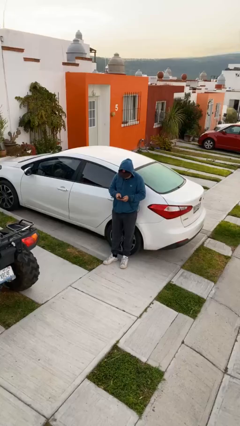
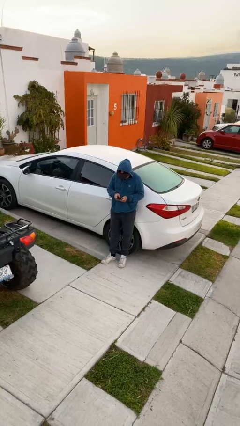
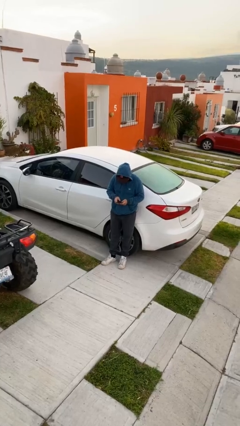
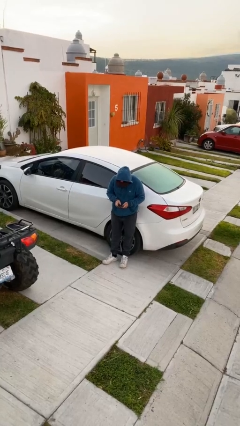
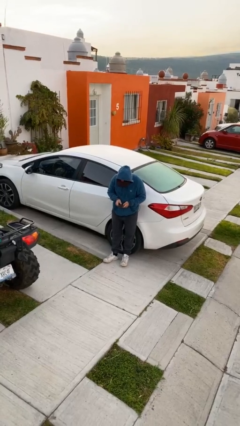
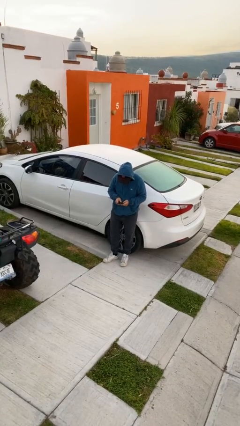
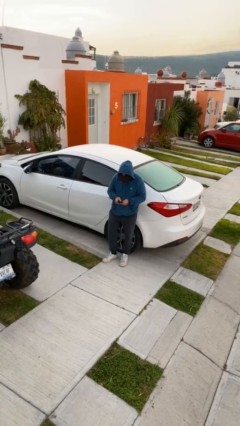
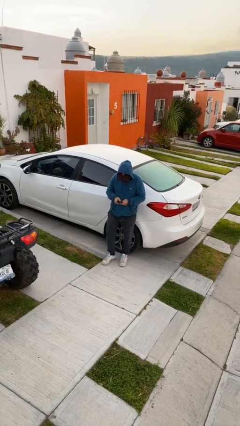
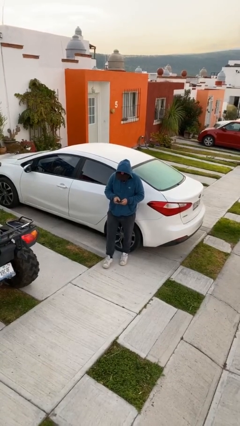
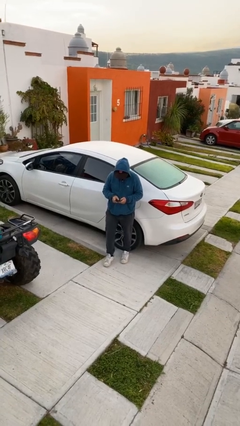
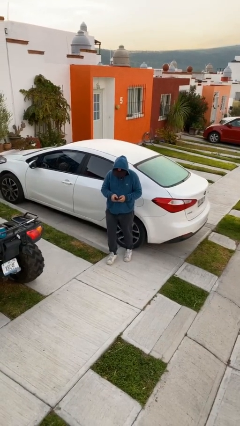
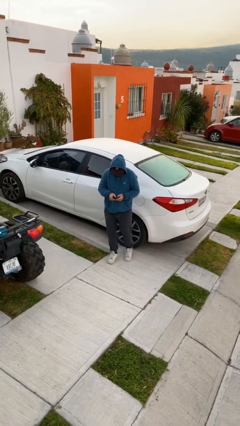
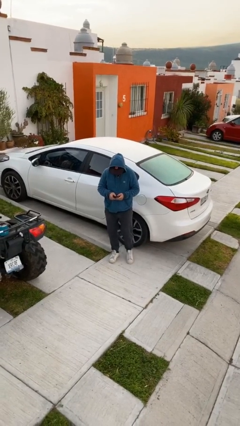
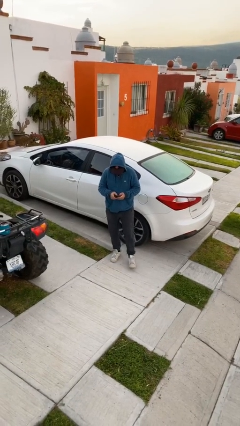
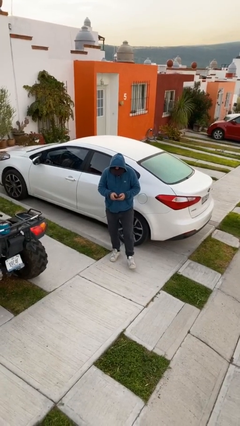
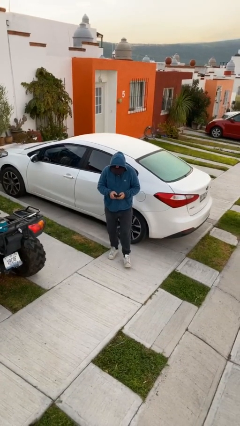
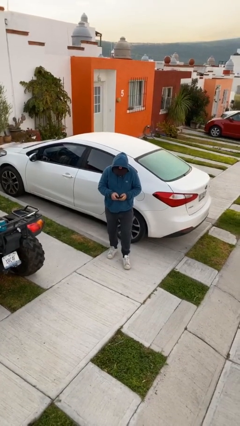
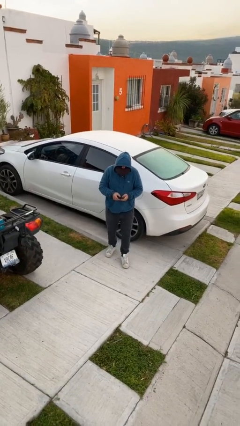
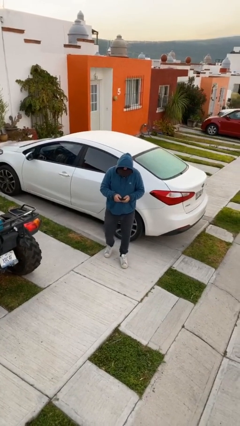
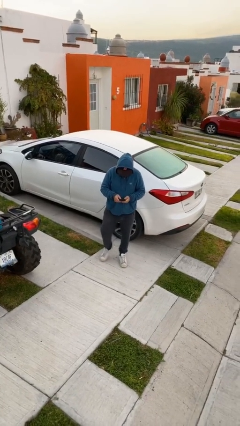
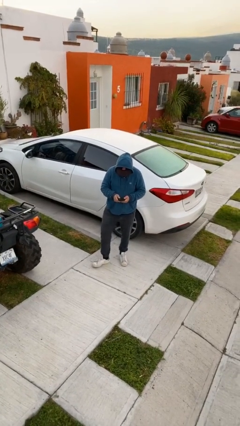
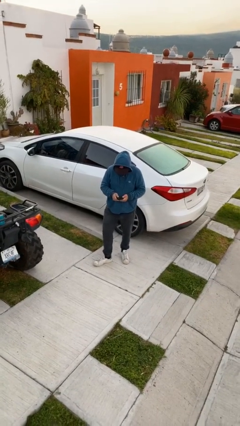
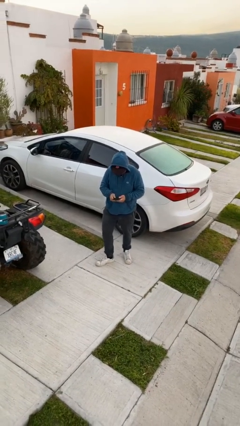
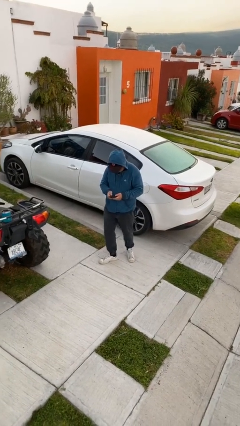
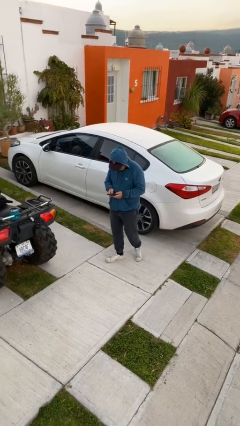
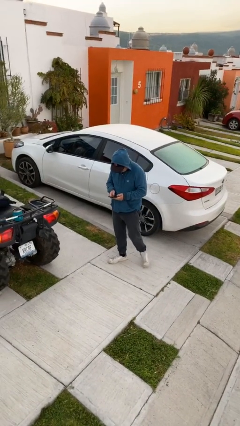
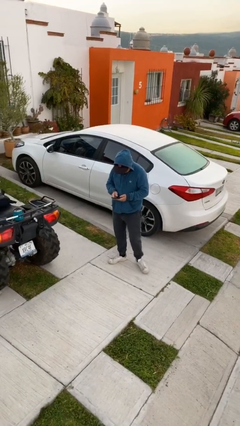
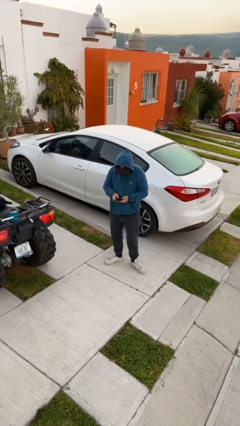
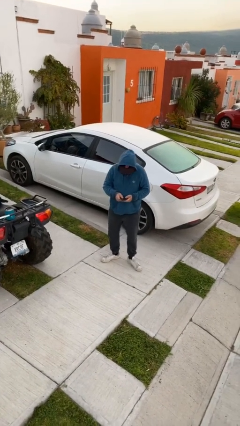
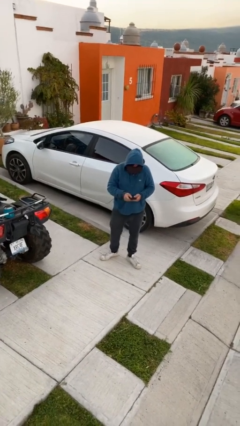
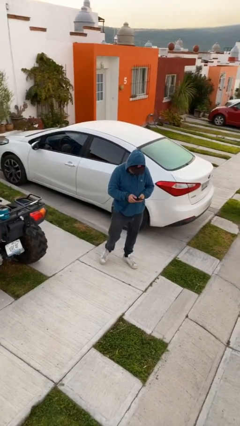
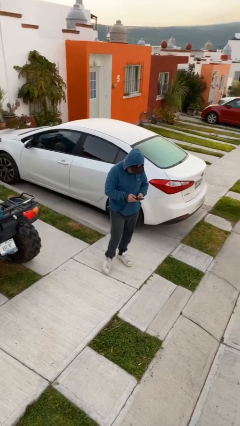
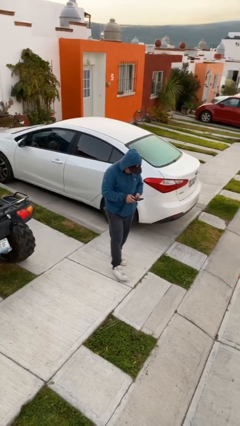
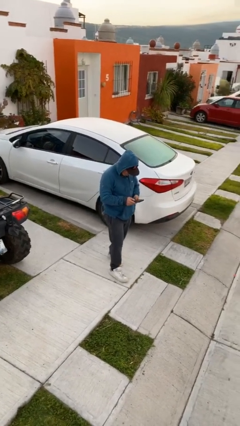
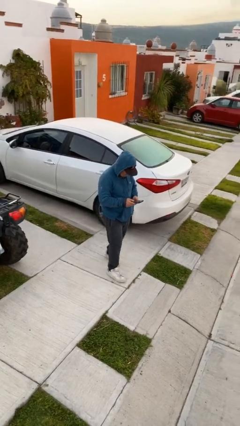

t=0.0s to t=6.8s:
person texts on phone

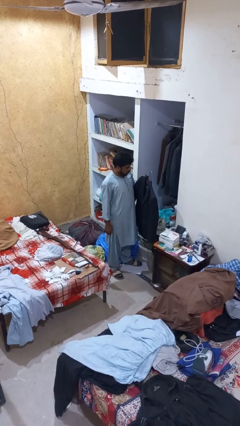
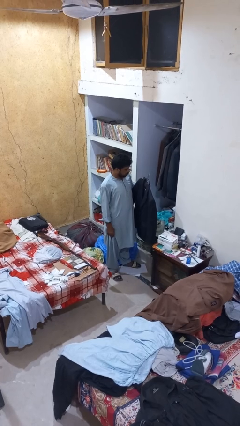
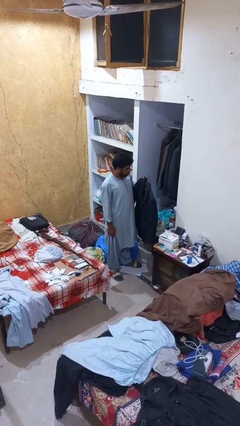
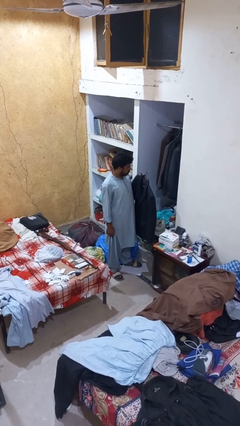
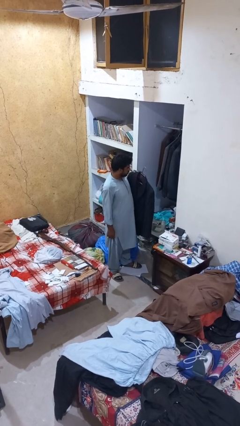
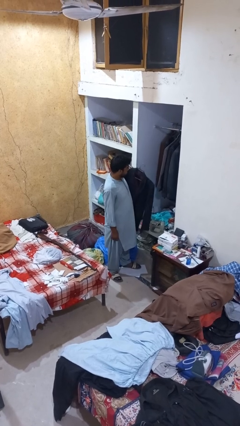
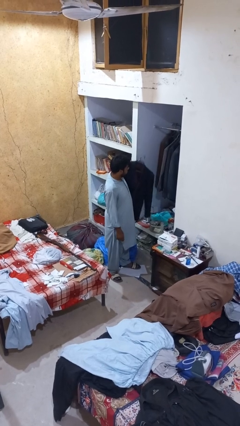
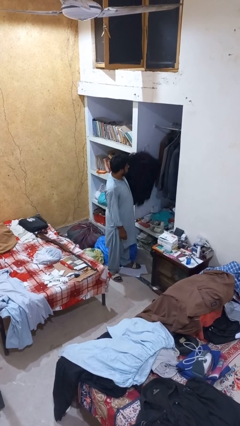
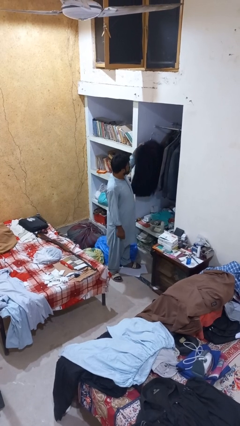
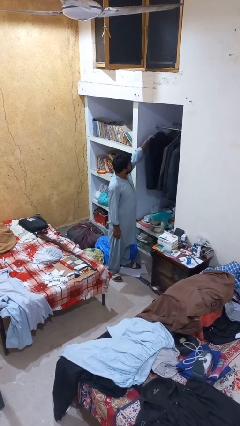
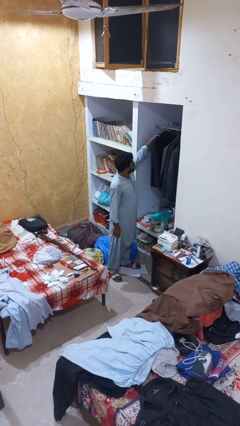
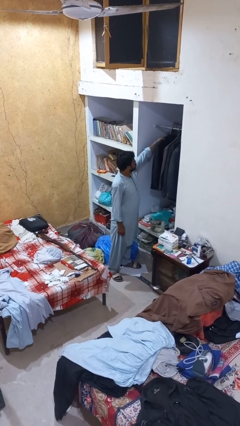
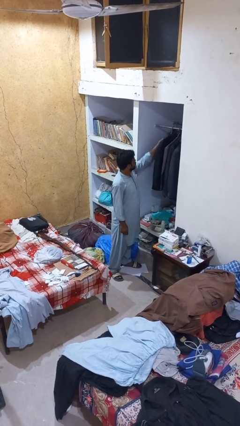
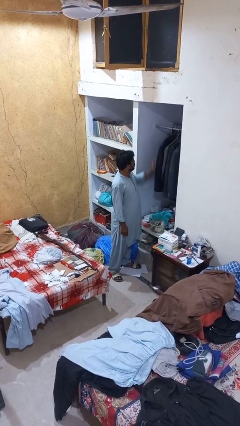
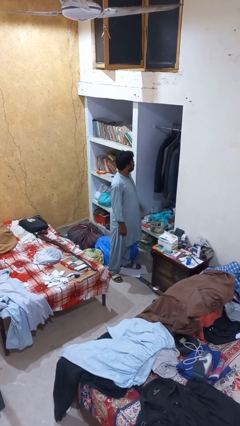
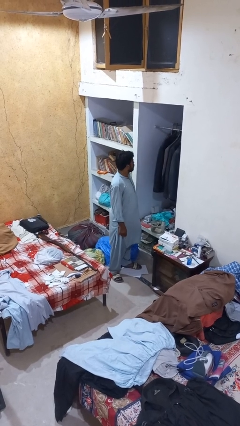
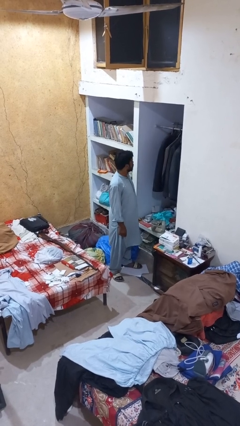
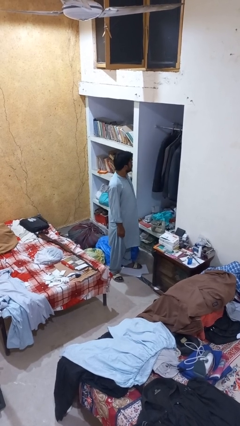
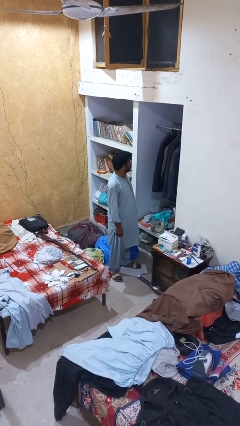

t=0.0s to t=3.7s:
person puts clothes into closet

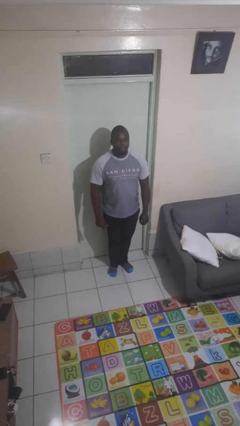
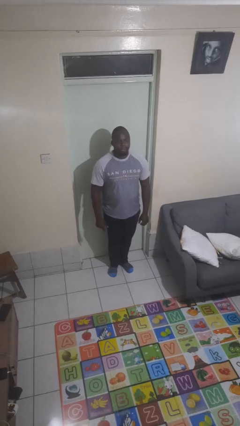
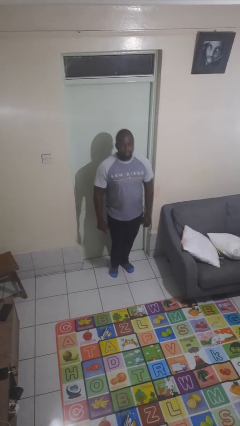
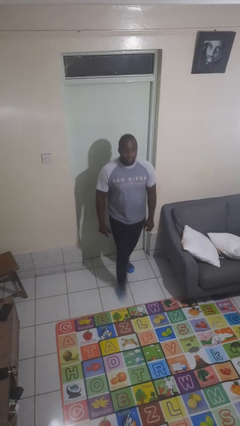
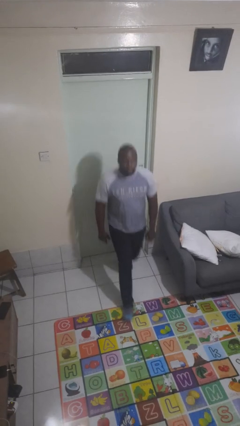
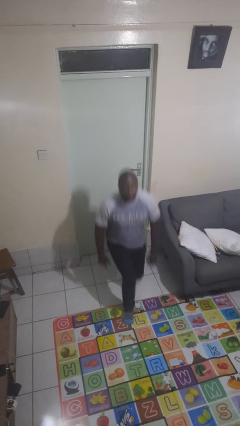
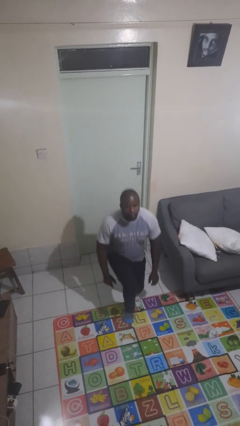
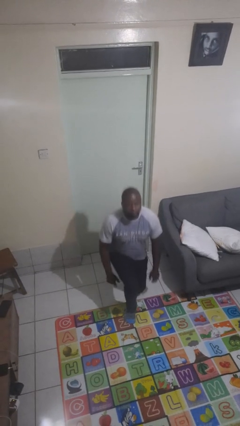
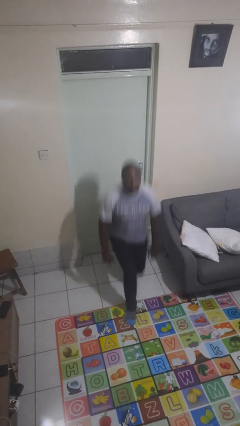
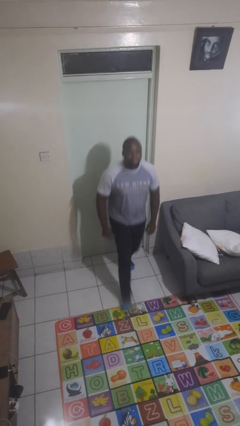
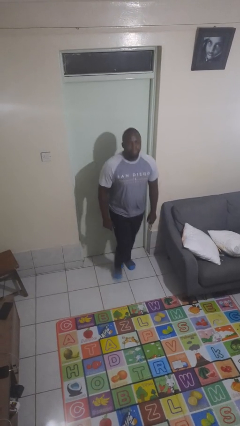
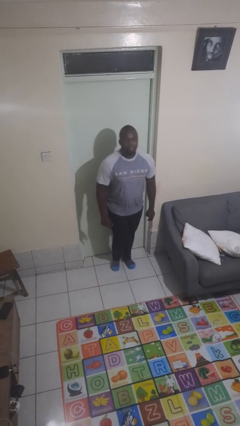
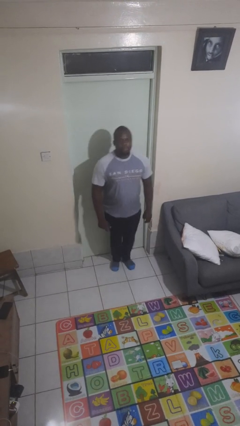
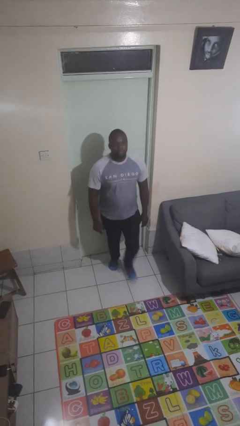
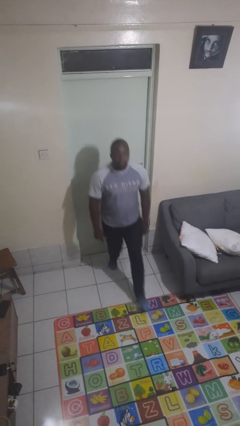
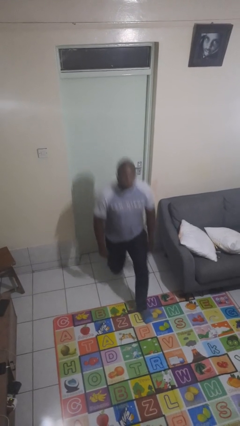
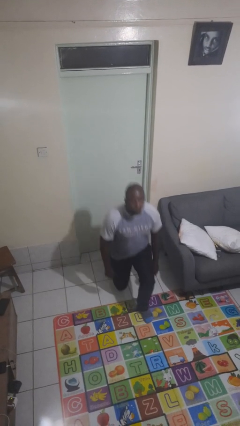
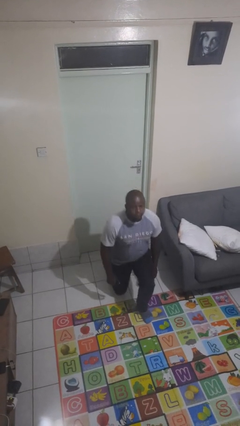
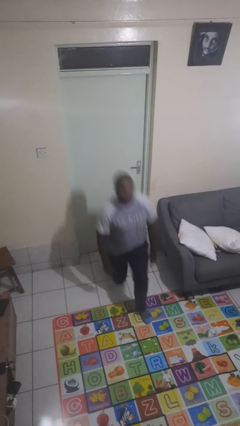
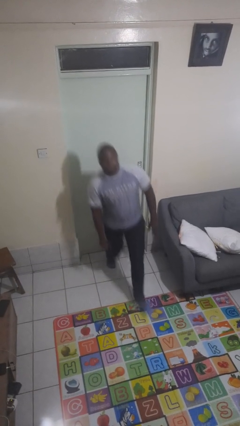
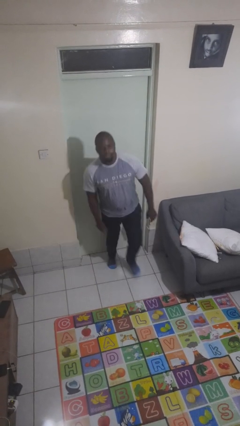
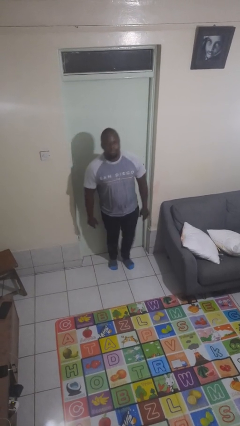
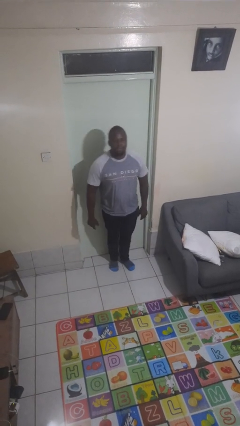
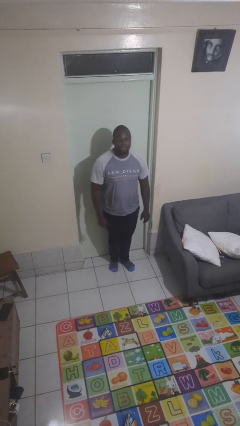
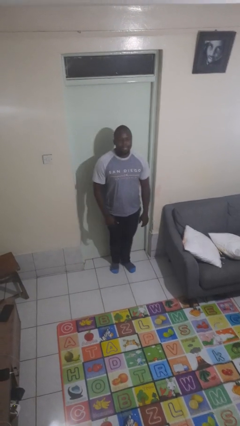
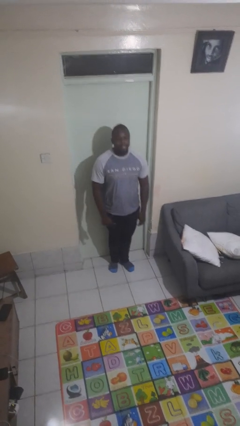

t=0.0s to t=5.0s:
person exercises with lunges

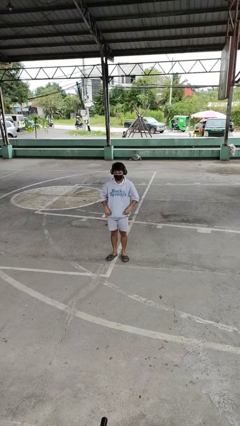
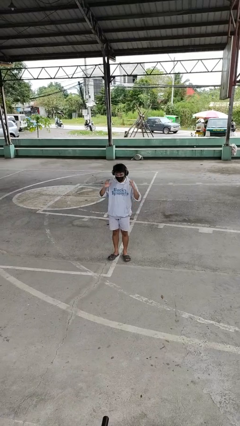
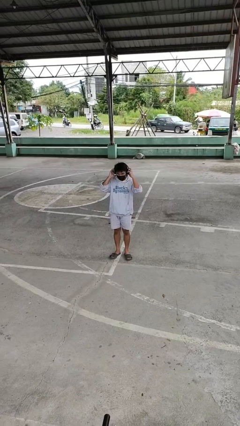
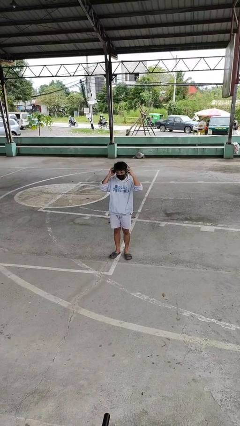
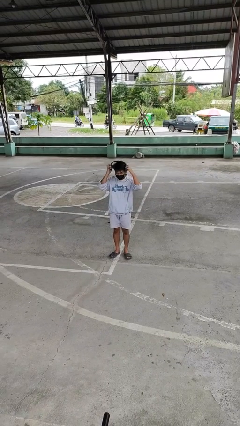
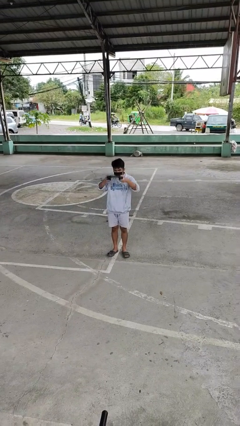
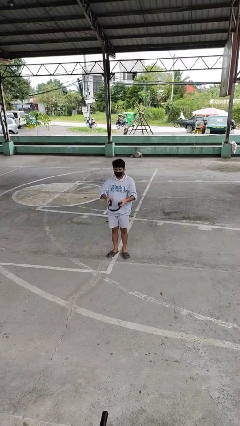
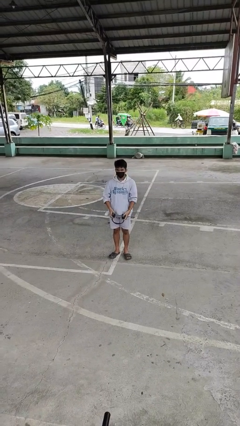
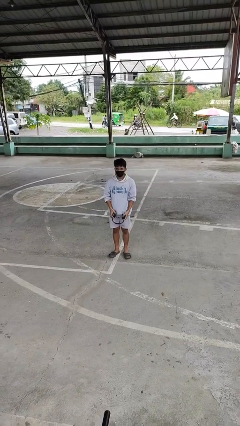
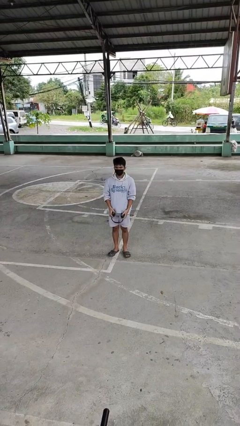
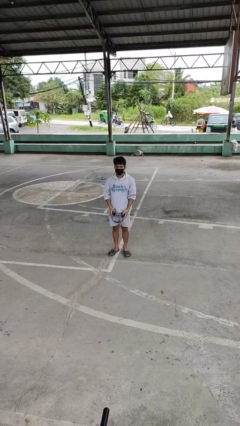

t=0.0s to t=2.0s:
person takes off headphones

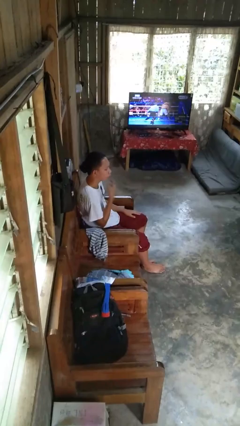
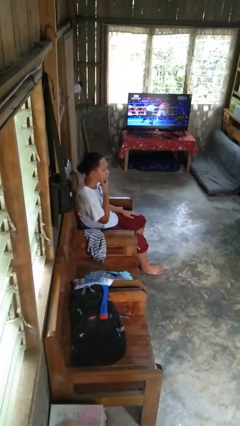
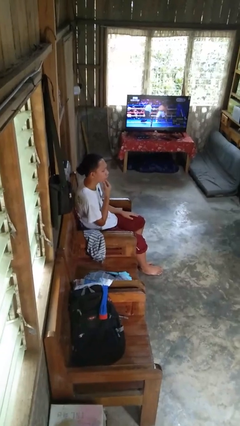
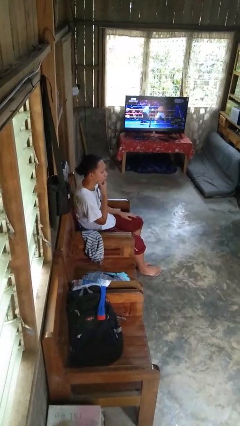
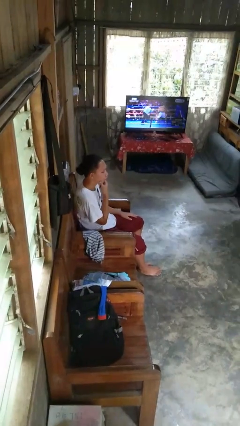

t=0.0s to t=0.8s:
person strokes chin
